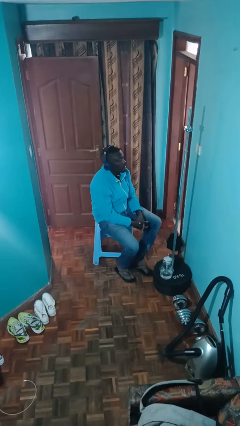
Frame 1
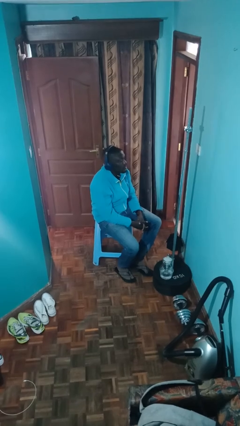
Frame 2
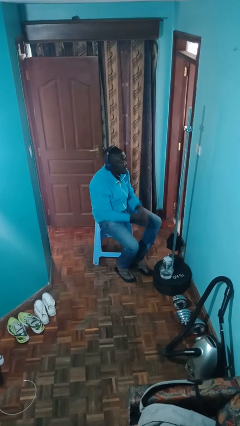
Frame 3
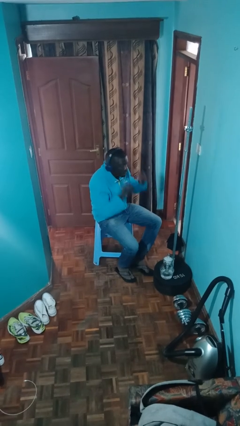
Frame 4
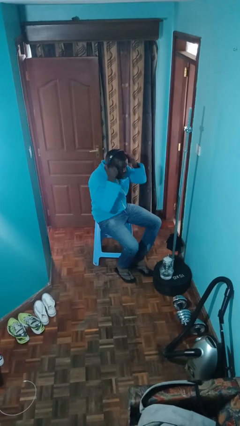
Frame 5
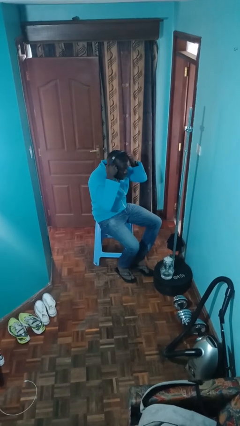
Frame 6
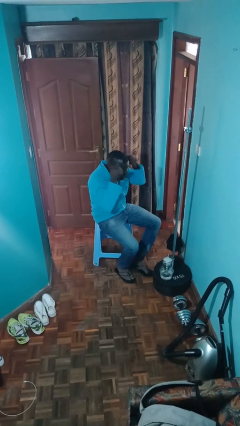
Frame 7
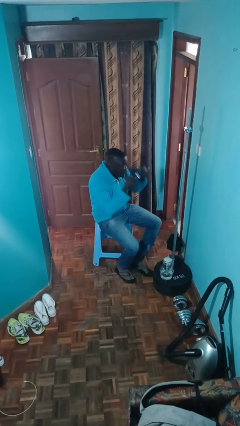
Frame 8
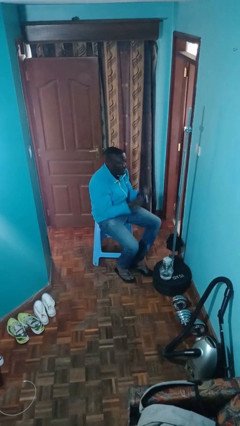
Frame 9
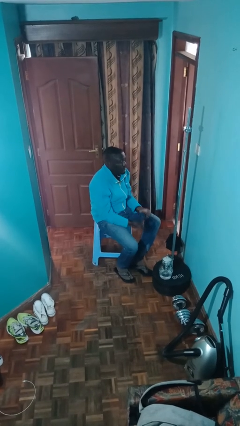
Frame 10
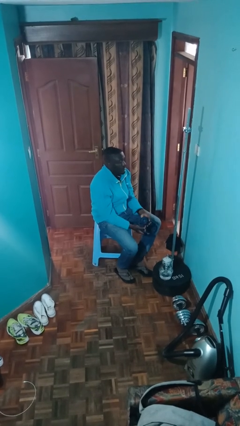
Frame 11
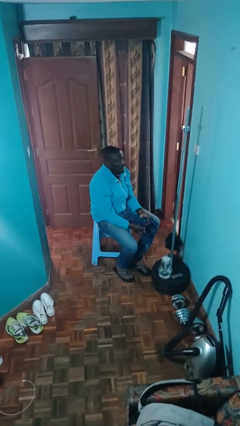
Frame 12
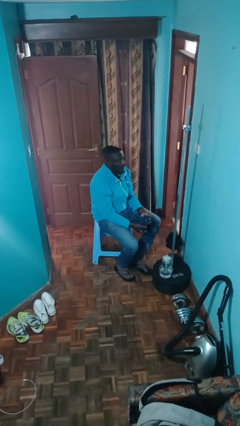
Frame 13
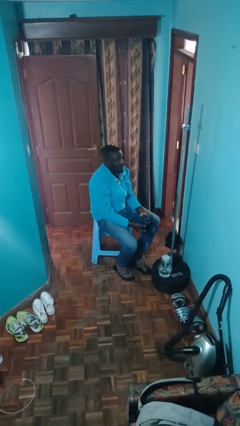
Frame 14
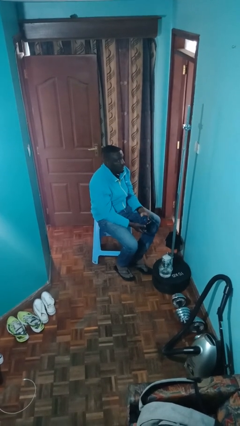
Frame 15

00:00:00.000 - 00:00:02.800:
person takes off headphones

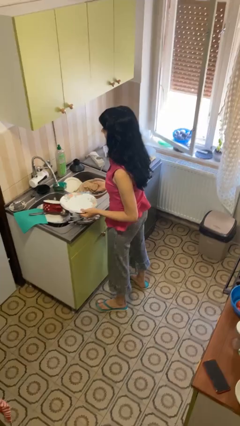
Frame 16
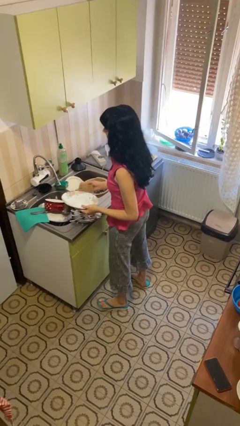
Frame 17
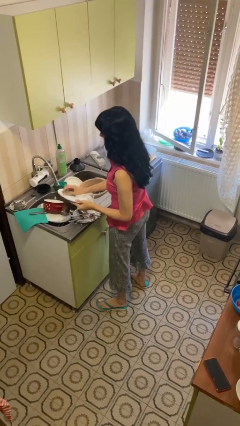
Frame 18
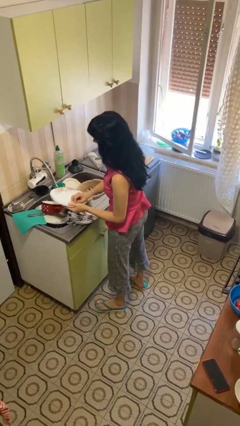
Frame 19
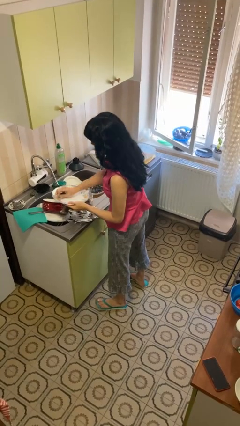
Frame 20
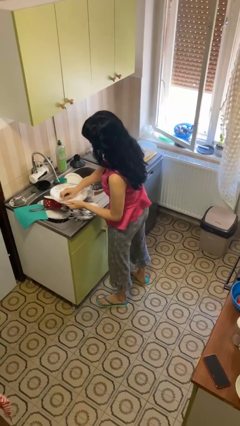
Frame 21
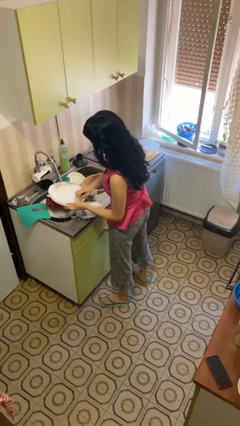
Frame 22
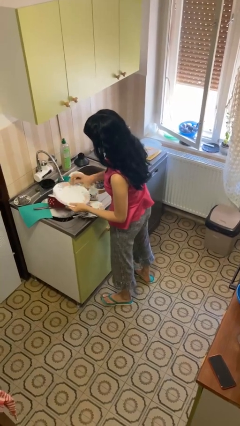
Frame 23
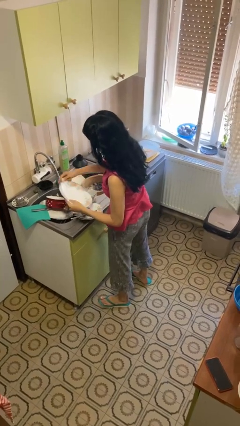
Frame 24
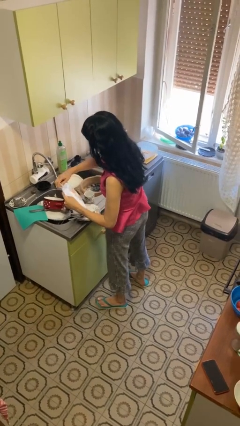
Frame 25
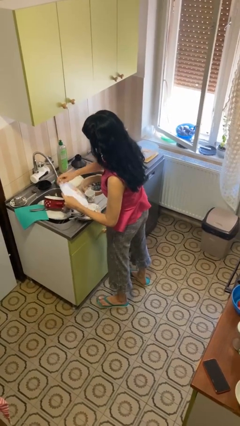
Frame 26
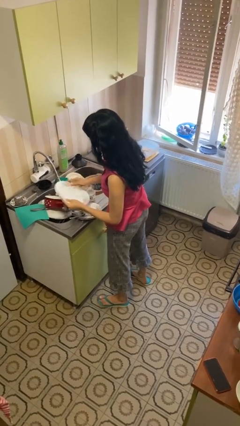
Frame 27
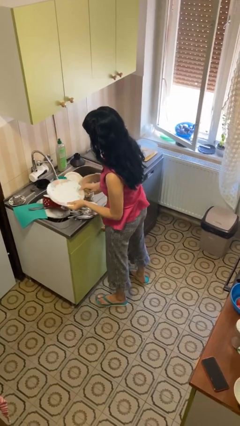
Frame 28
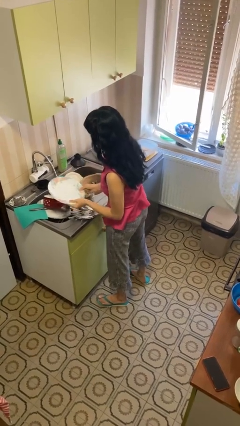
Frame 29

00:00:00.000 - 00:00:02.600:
person washes dish

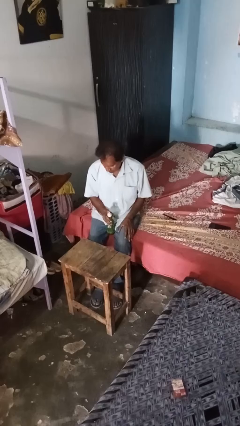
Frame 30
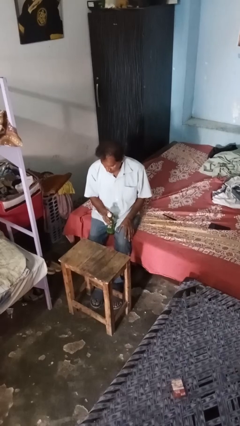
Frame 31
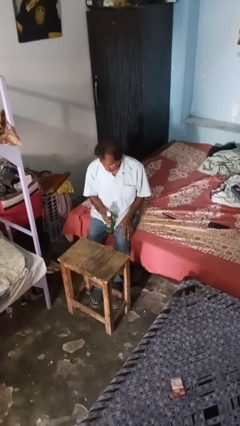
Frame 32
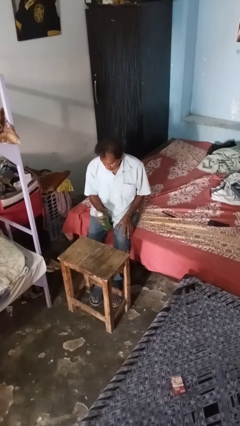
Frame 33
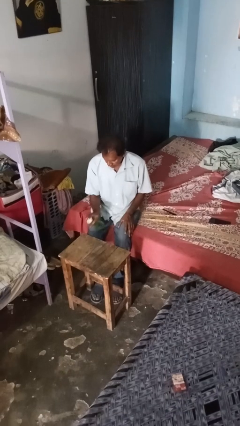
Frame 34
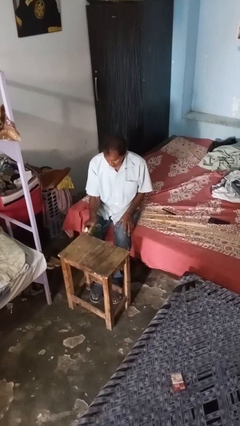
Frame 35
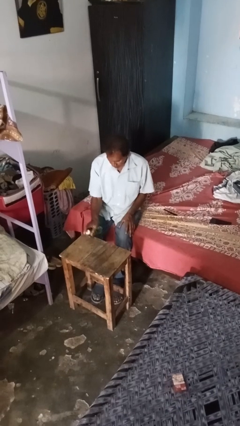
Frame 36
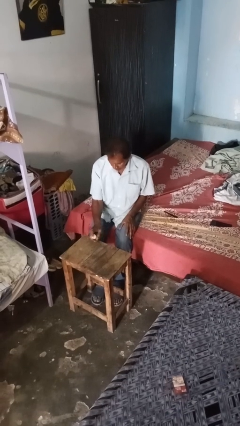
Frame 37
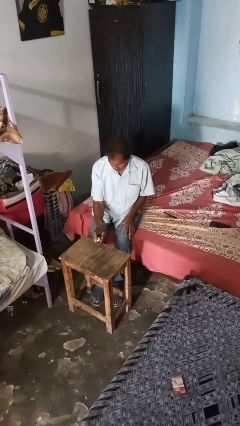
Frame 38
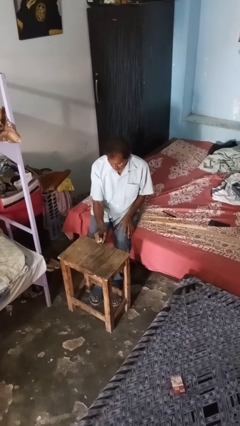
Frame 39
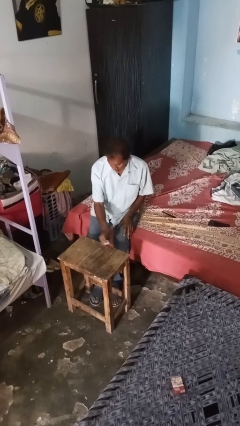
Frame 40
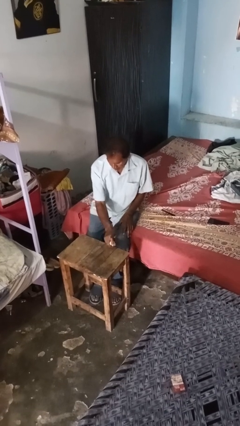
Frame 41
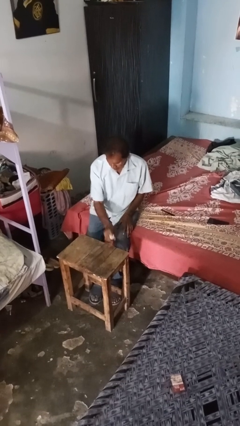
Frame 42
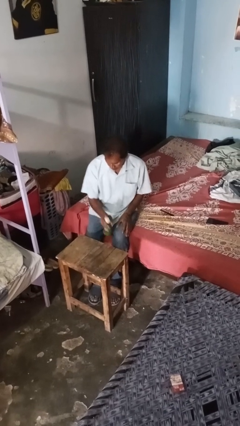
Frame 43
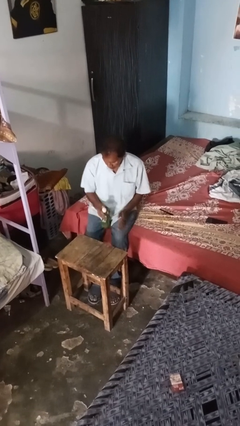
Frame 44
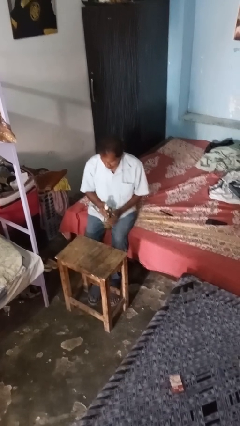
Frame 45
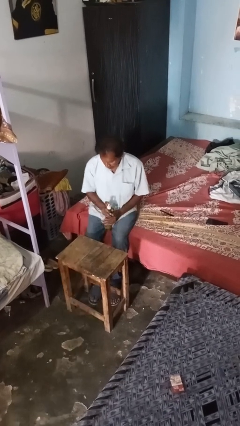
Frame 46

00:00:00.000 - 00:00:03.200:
person sprays from bottle

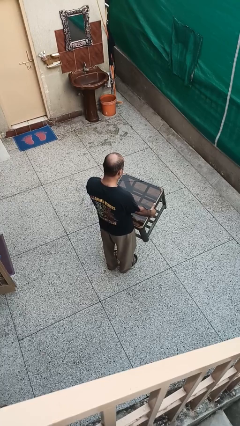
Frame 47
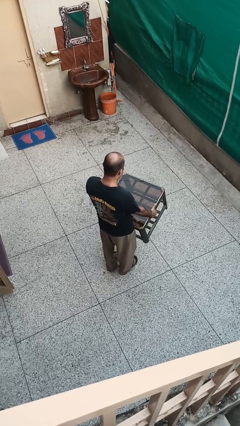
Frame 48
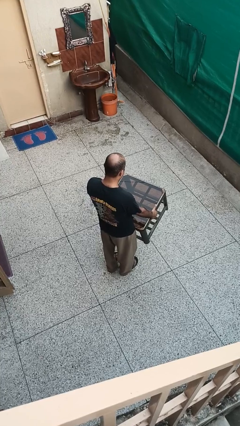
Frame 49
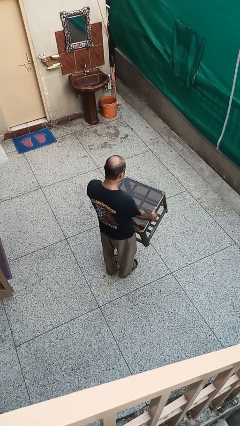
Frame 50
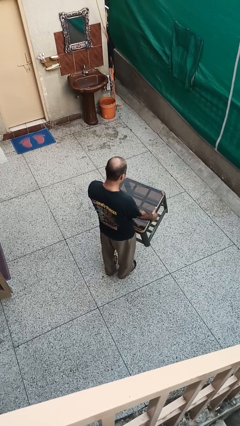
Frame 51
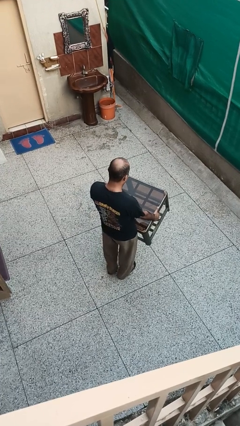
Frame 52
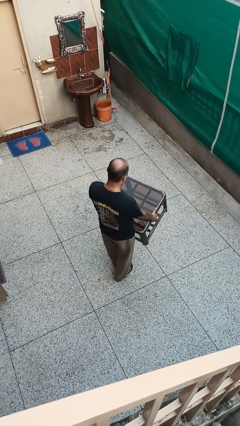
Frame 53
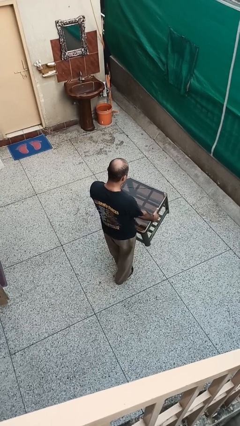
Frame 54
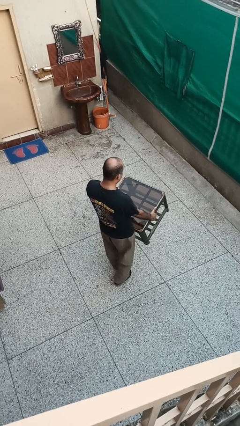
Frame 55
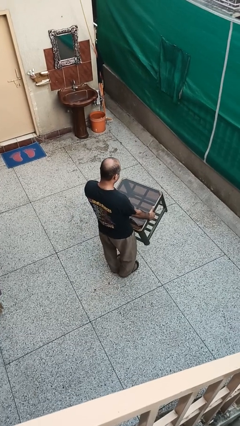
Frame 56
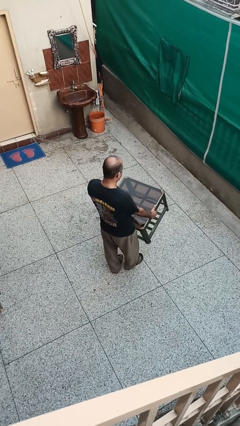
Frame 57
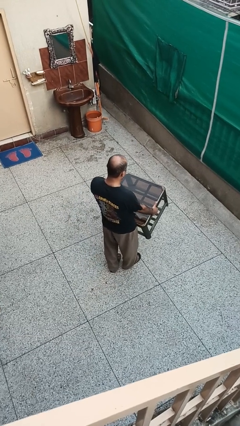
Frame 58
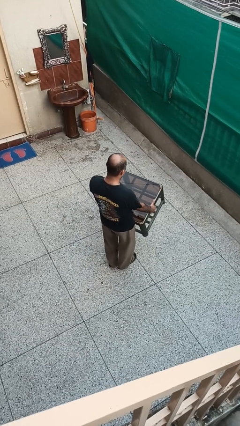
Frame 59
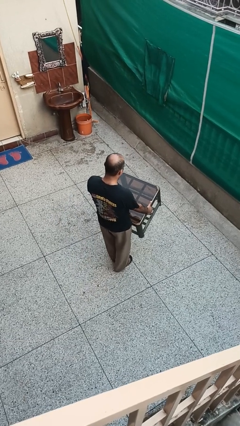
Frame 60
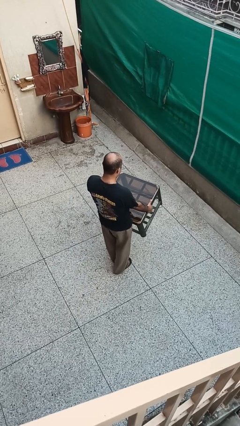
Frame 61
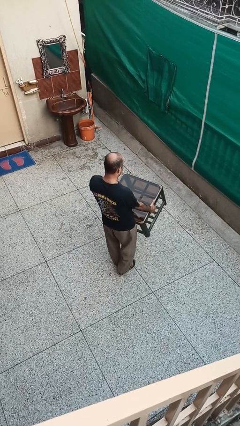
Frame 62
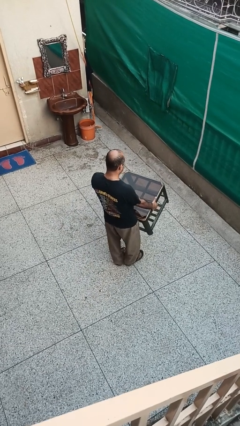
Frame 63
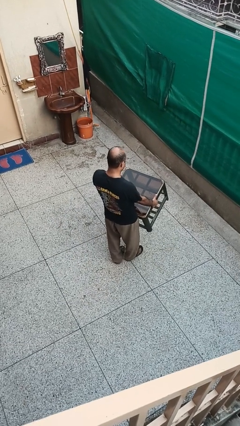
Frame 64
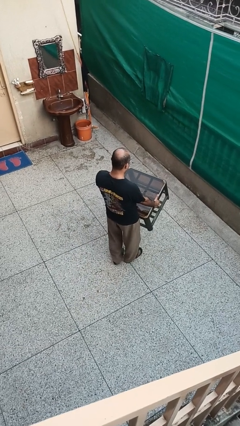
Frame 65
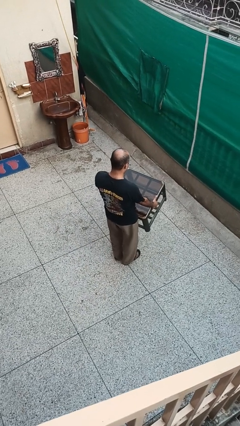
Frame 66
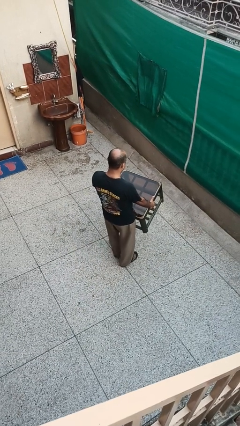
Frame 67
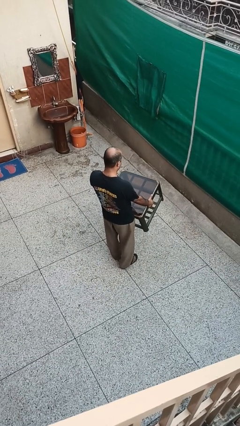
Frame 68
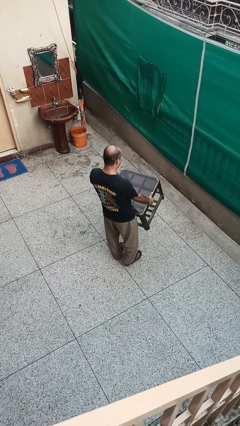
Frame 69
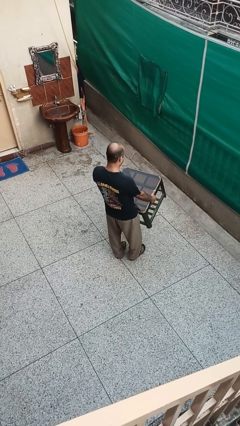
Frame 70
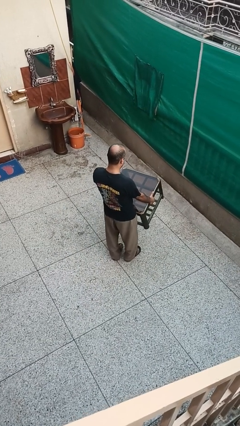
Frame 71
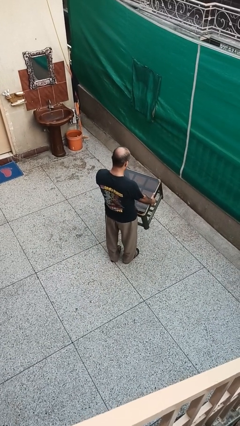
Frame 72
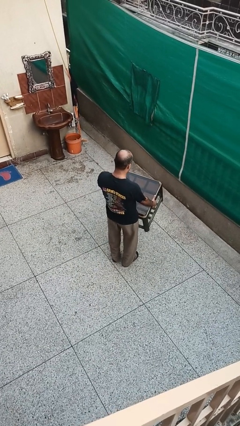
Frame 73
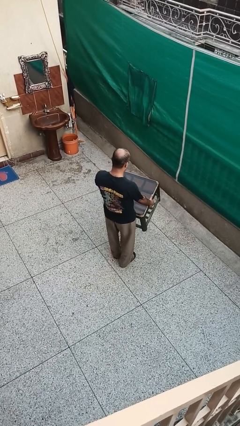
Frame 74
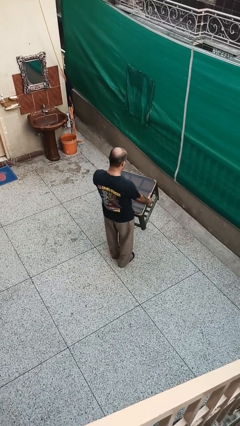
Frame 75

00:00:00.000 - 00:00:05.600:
person carries furniture

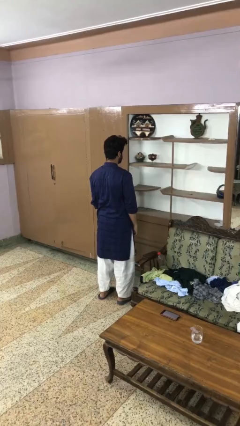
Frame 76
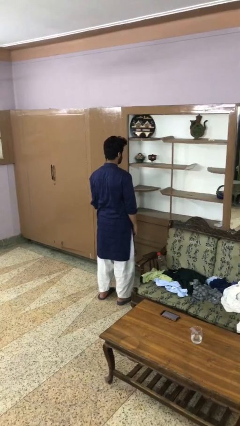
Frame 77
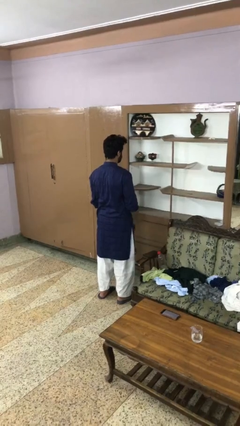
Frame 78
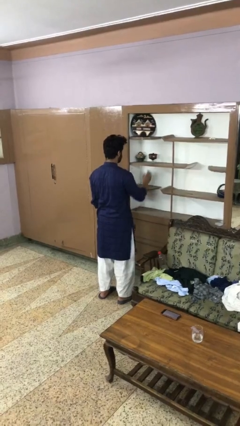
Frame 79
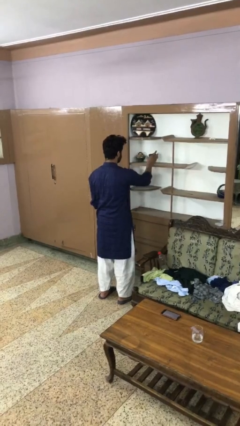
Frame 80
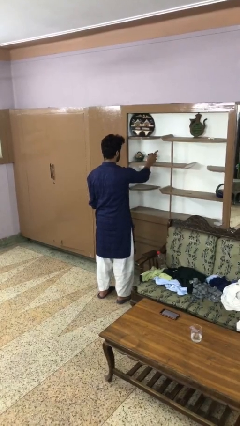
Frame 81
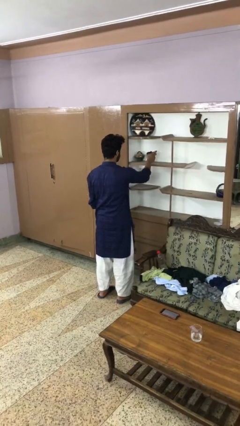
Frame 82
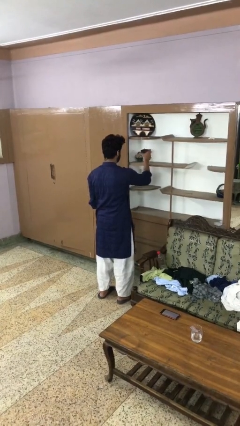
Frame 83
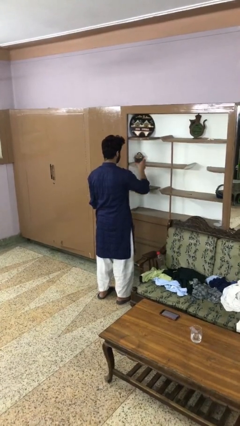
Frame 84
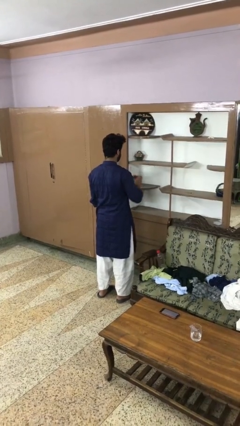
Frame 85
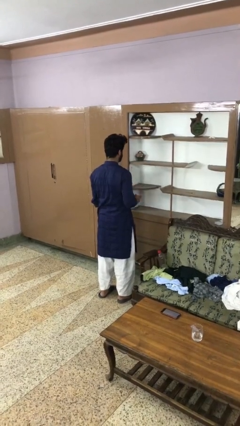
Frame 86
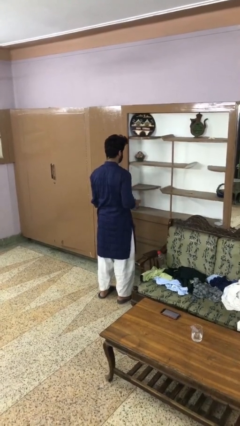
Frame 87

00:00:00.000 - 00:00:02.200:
person picks up object from shelf

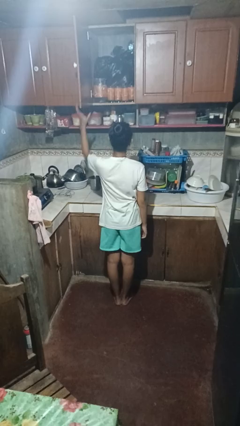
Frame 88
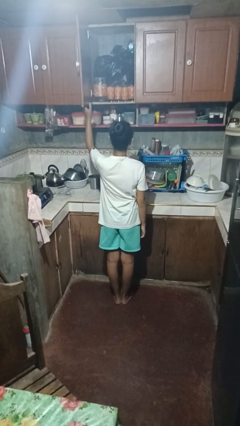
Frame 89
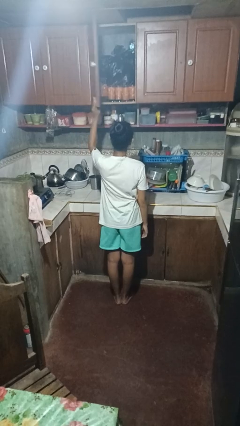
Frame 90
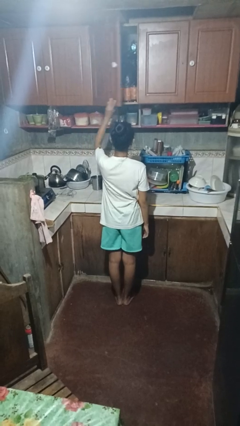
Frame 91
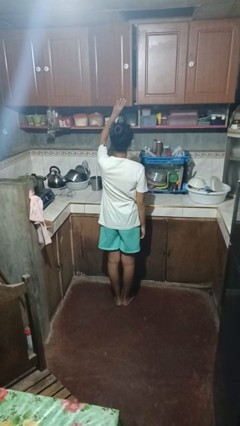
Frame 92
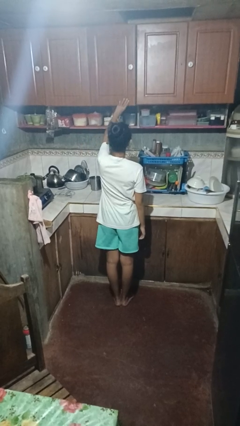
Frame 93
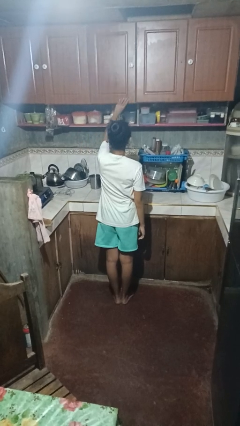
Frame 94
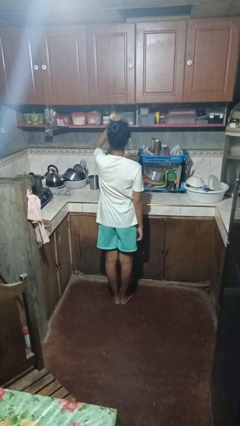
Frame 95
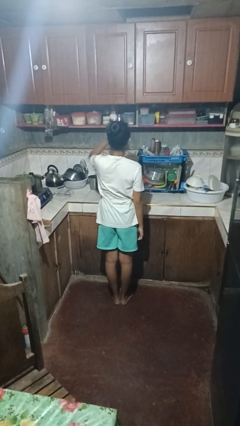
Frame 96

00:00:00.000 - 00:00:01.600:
person closes cabinet
